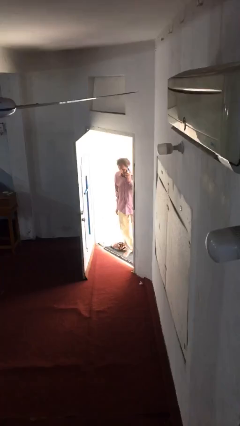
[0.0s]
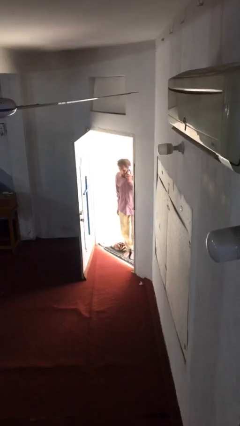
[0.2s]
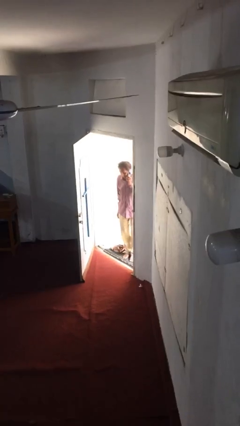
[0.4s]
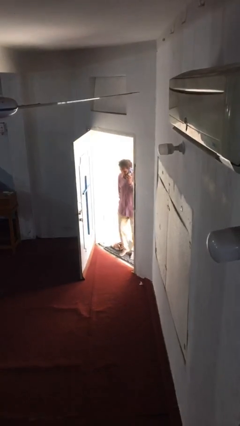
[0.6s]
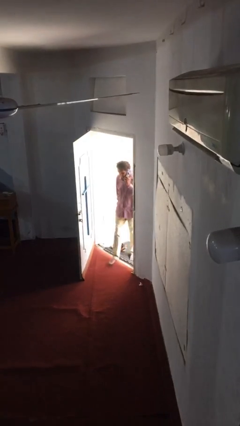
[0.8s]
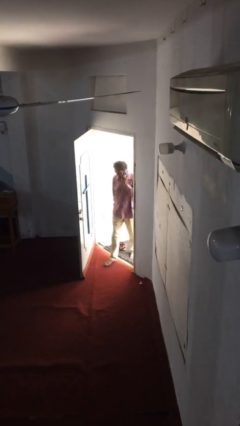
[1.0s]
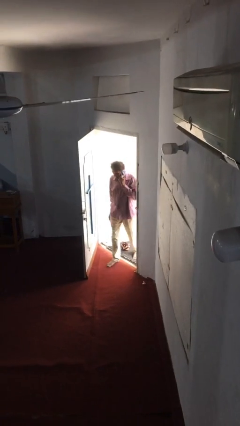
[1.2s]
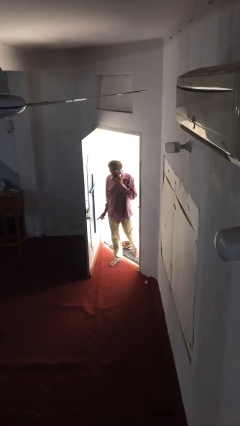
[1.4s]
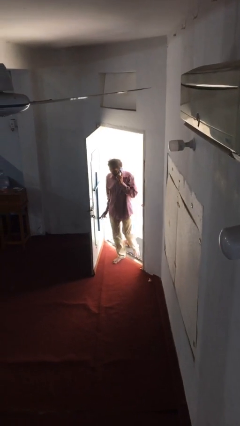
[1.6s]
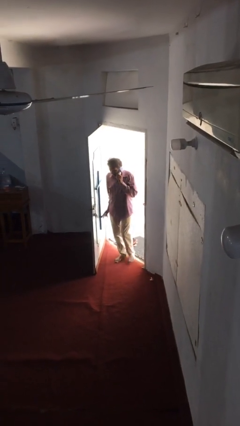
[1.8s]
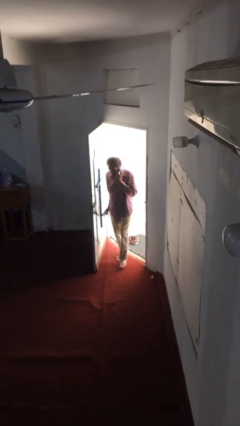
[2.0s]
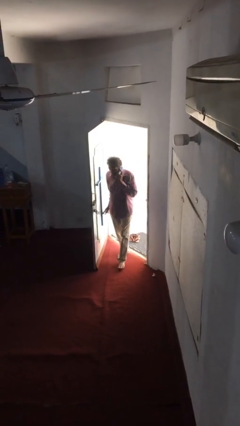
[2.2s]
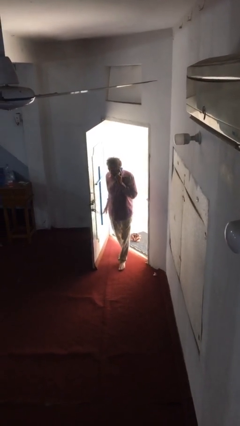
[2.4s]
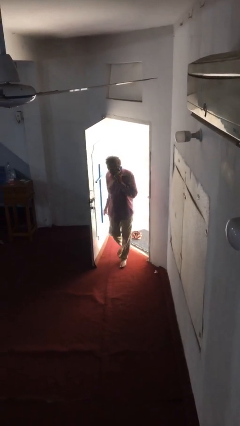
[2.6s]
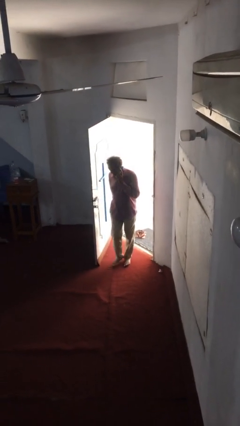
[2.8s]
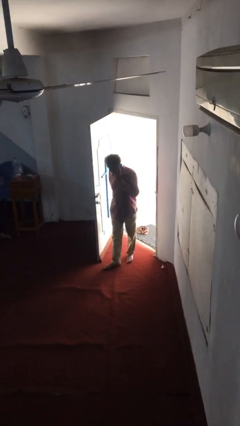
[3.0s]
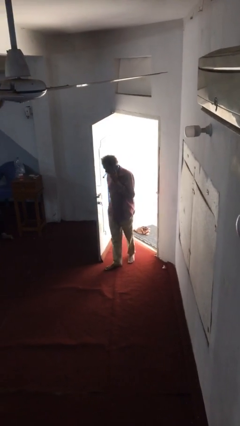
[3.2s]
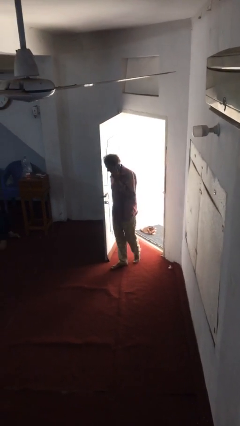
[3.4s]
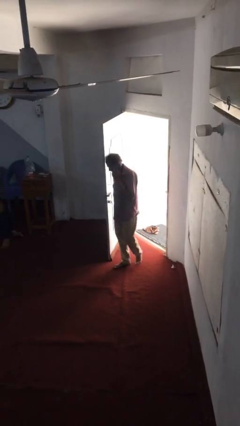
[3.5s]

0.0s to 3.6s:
person enters scene through structure

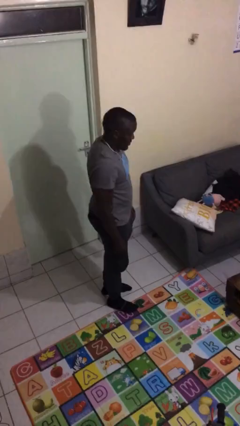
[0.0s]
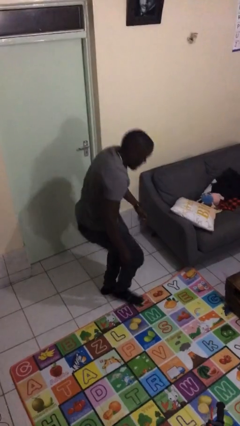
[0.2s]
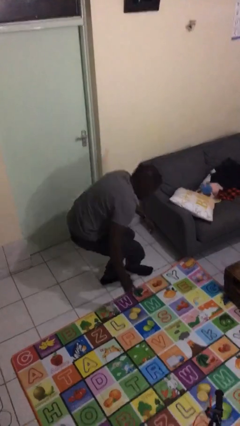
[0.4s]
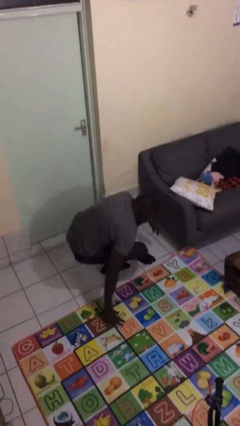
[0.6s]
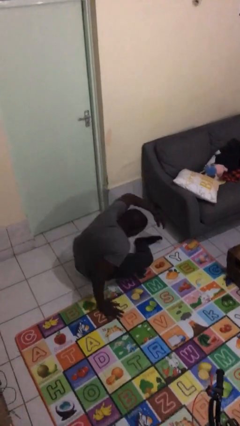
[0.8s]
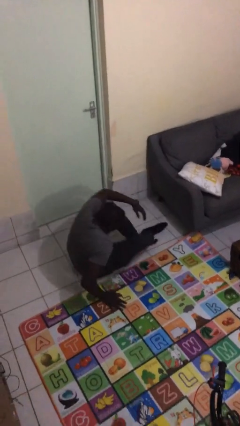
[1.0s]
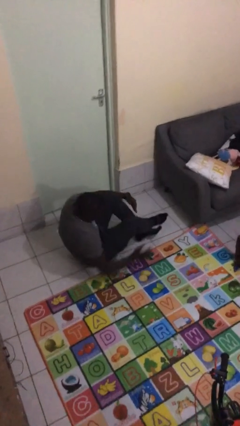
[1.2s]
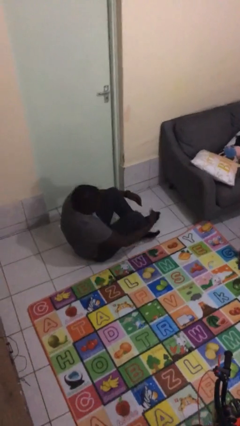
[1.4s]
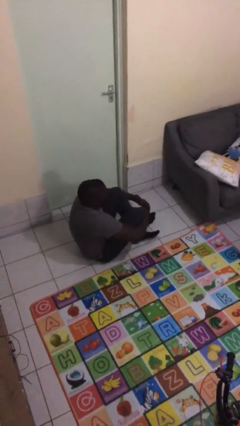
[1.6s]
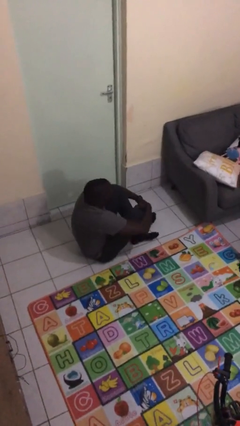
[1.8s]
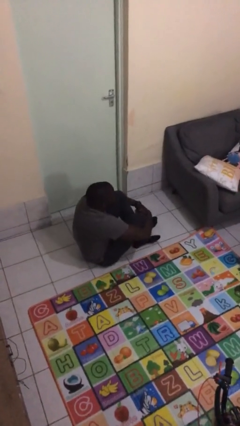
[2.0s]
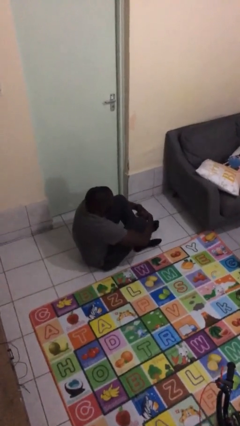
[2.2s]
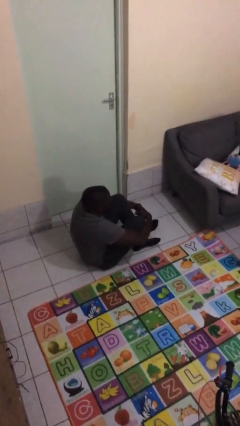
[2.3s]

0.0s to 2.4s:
person sits crisscross

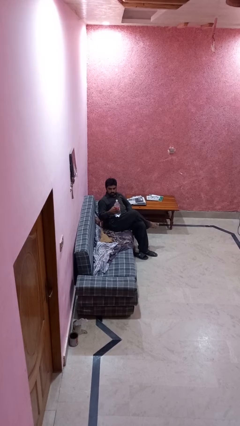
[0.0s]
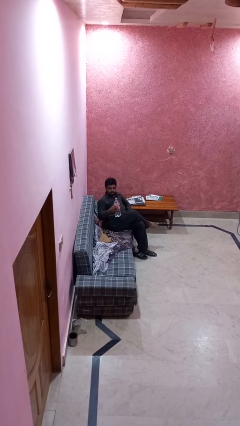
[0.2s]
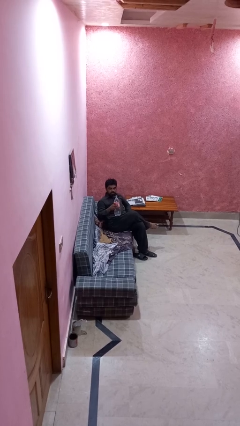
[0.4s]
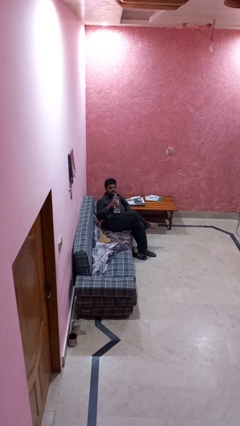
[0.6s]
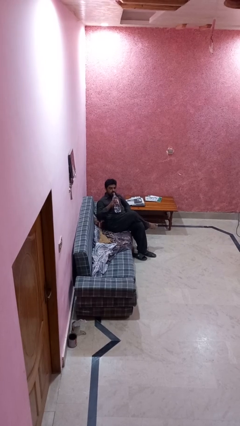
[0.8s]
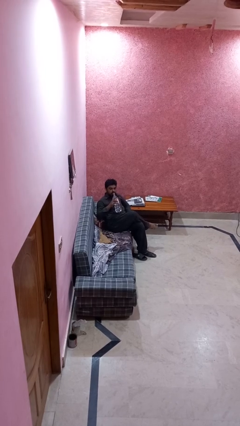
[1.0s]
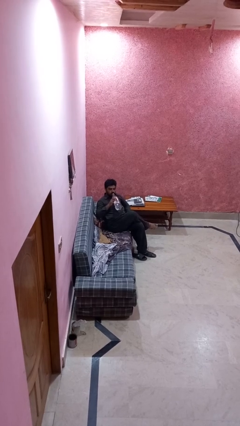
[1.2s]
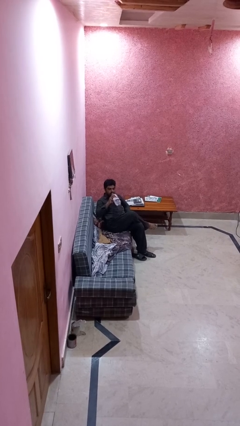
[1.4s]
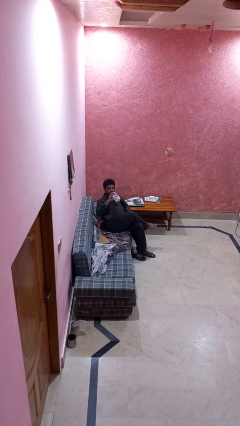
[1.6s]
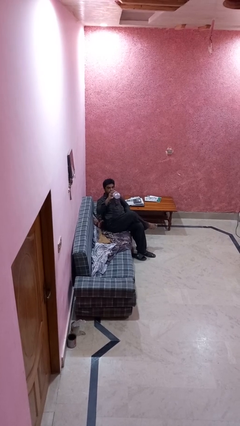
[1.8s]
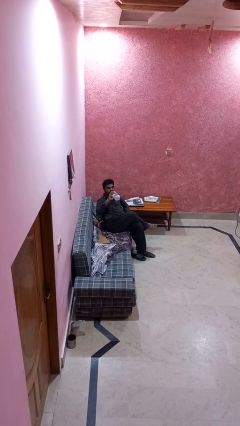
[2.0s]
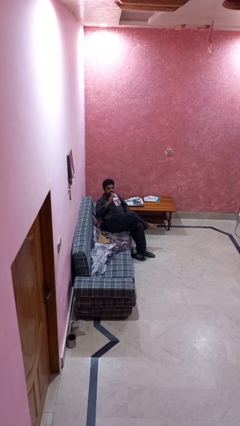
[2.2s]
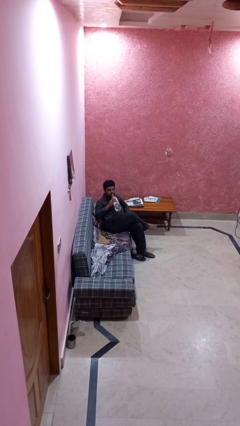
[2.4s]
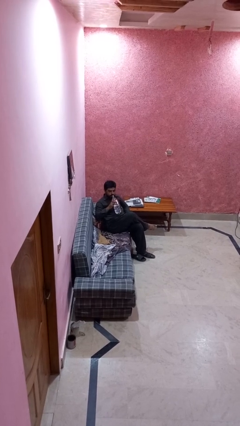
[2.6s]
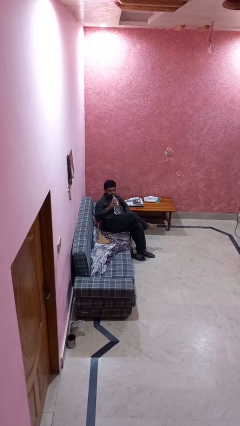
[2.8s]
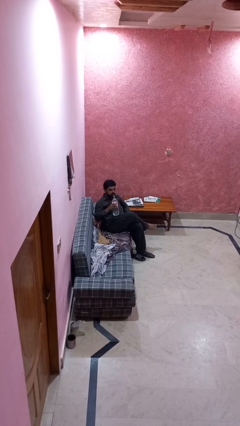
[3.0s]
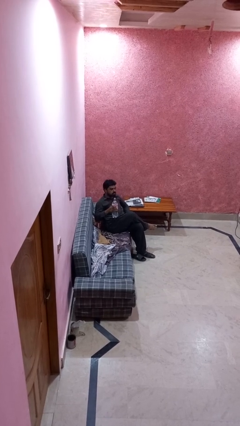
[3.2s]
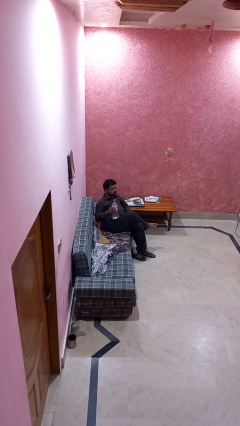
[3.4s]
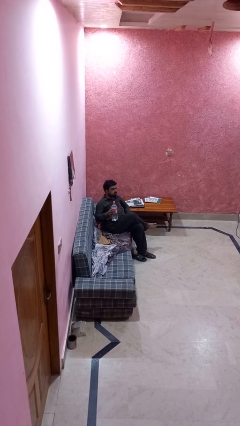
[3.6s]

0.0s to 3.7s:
person drinks from bottle

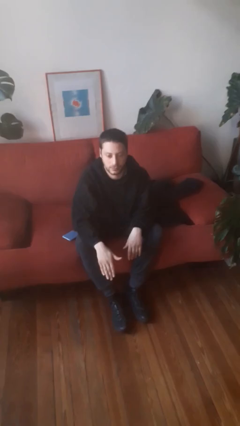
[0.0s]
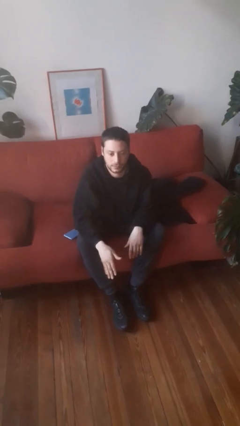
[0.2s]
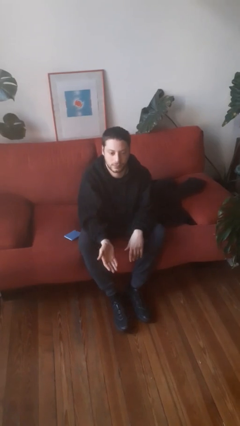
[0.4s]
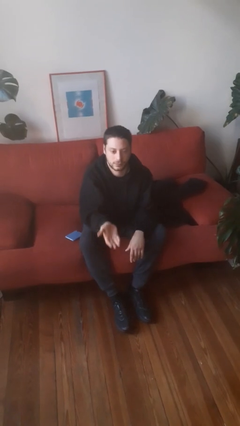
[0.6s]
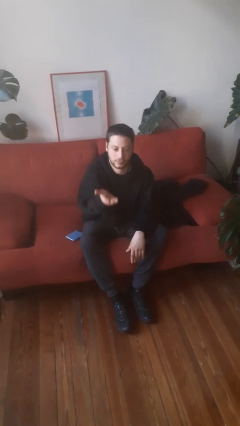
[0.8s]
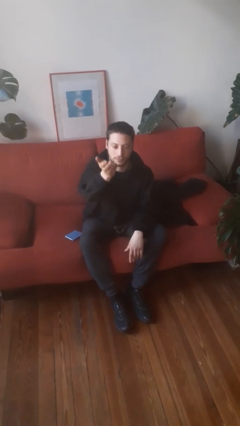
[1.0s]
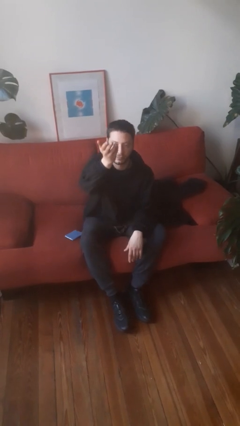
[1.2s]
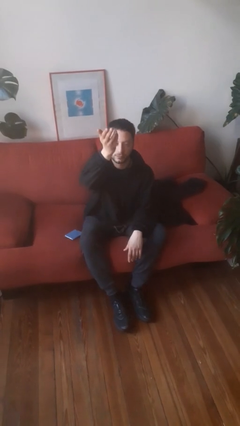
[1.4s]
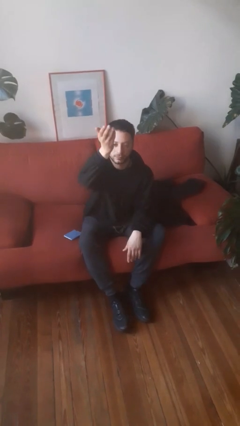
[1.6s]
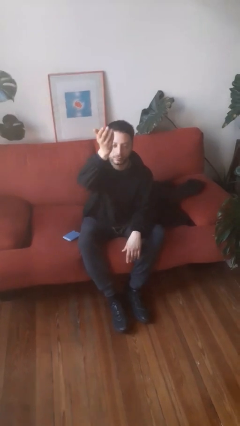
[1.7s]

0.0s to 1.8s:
person gestures swipe up

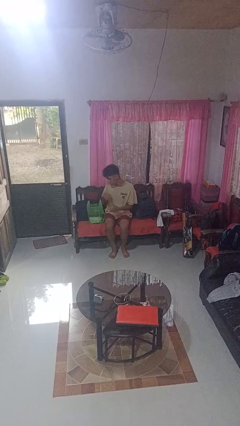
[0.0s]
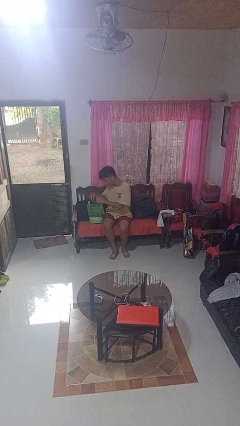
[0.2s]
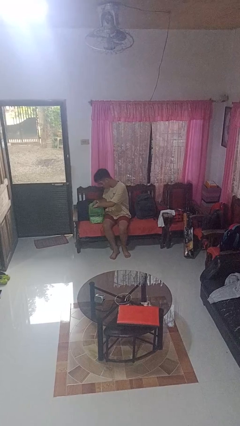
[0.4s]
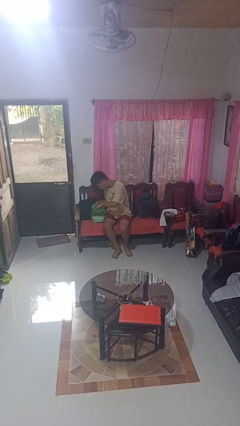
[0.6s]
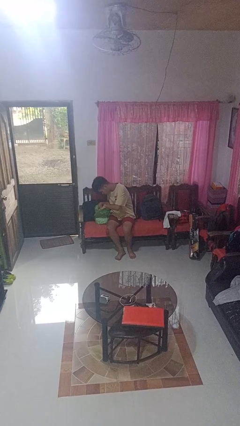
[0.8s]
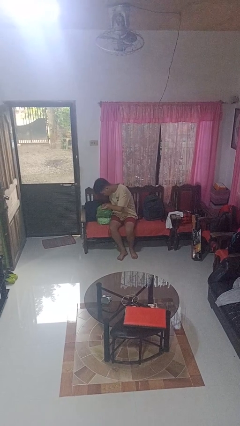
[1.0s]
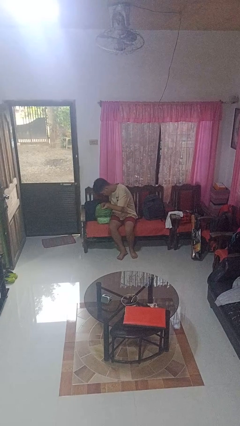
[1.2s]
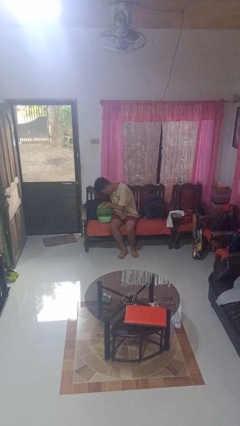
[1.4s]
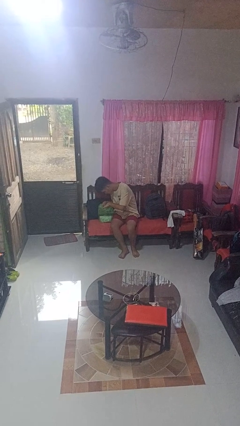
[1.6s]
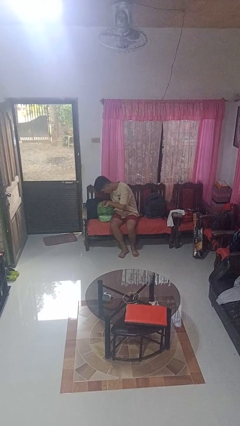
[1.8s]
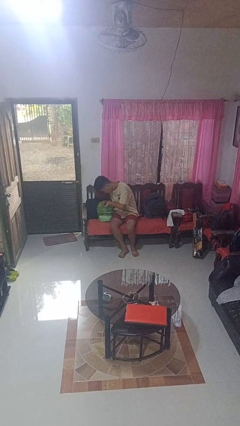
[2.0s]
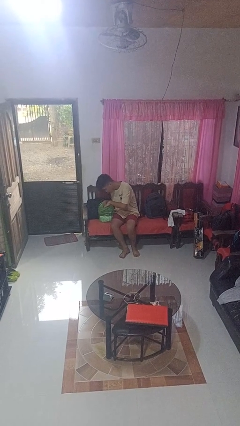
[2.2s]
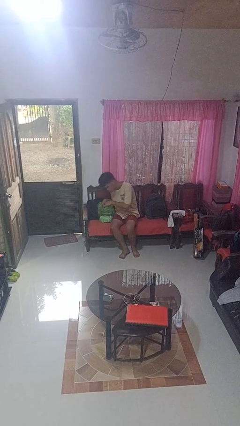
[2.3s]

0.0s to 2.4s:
person searches in bag

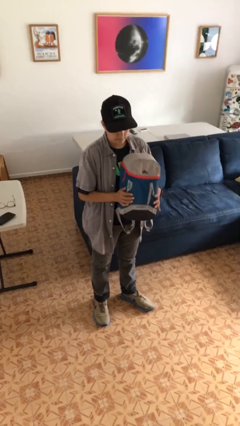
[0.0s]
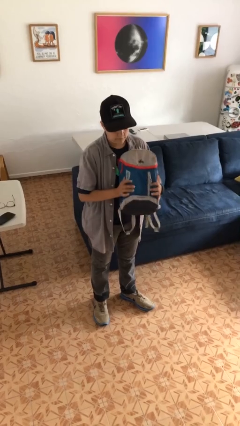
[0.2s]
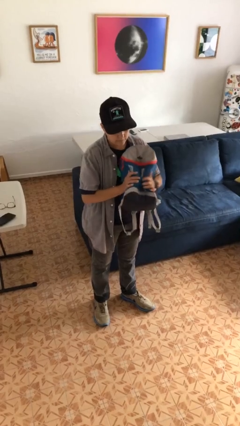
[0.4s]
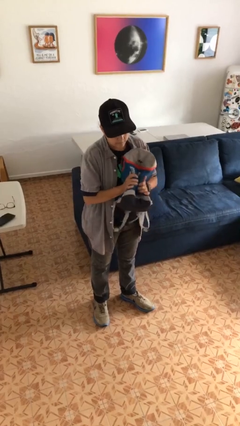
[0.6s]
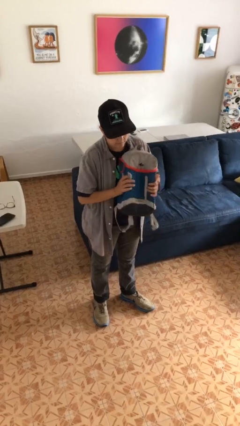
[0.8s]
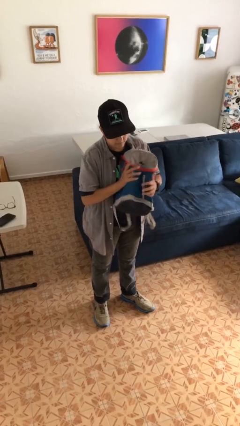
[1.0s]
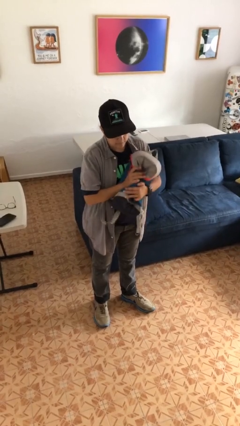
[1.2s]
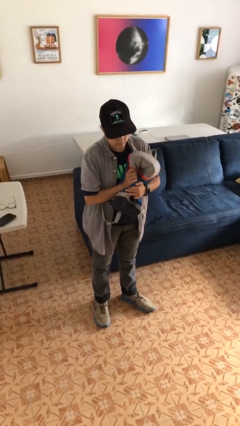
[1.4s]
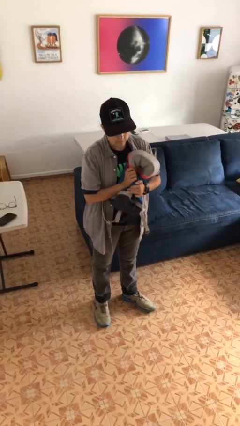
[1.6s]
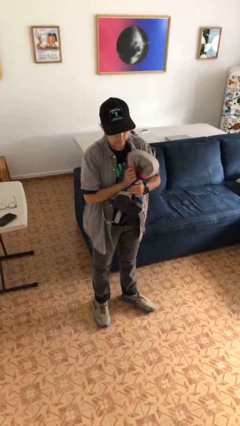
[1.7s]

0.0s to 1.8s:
person squeezes object

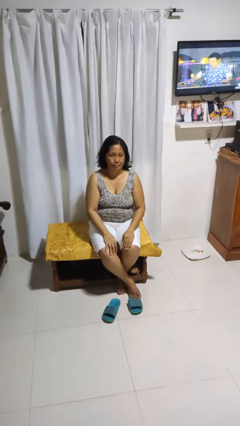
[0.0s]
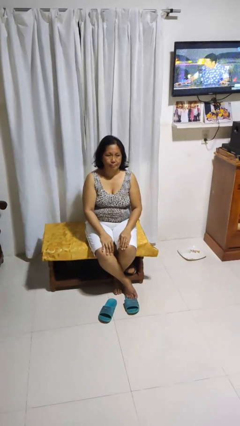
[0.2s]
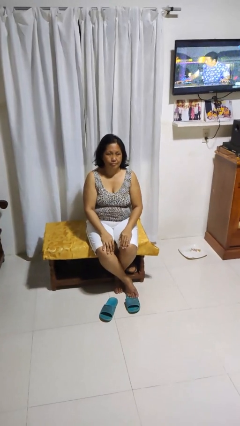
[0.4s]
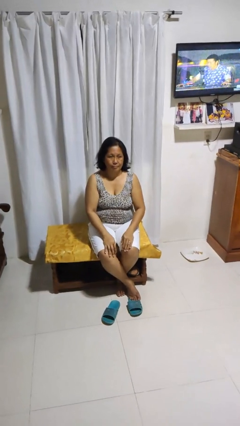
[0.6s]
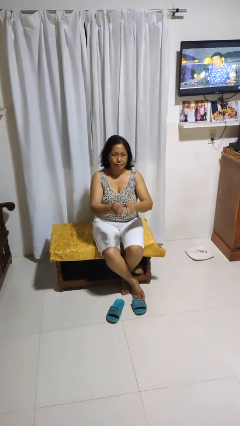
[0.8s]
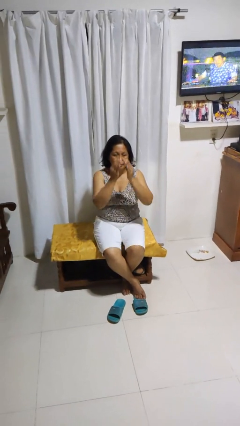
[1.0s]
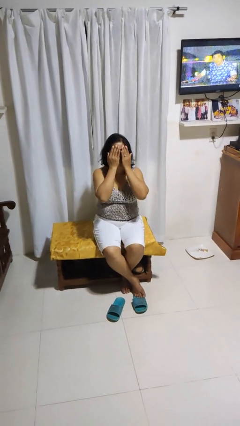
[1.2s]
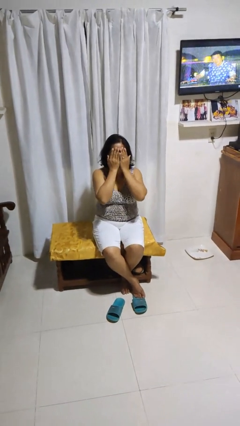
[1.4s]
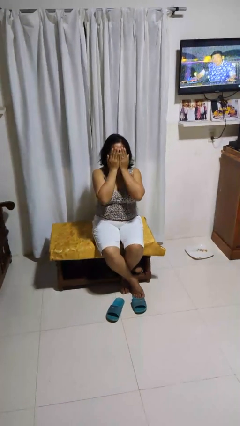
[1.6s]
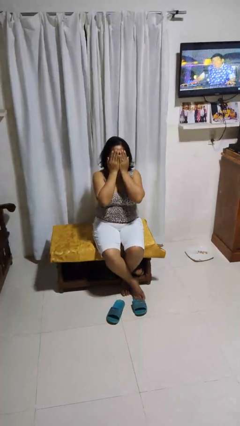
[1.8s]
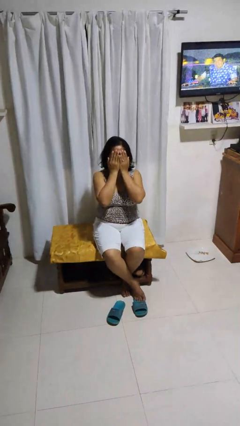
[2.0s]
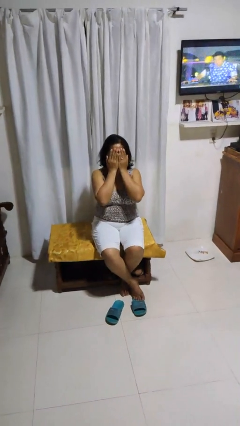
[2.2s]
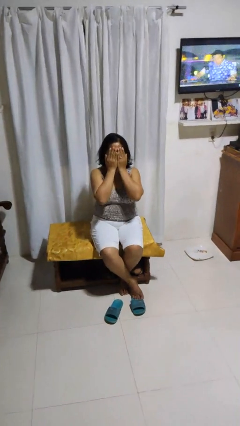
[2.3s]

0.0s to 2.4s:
person covers face with hands
